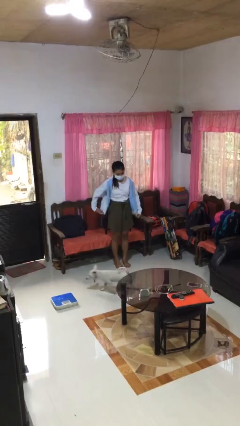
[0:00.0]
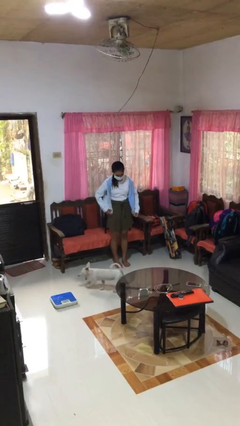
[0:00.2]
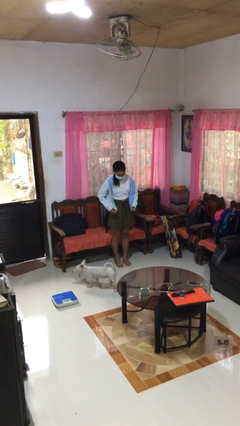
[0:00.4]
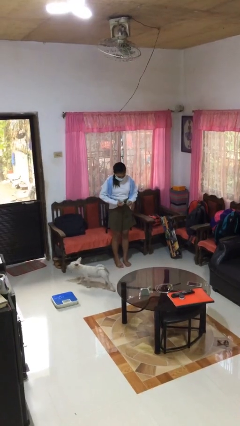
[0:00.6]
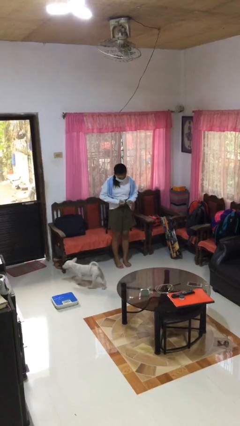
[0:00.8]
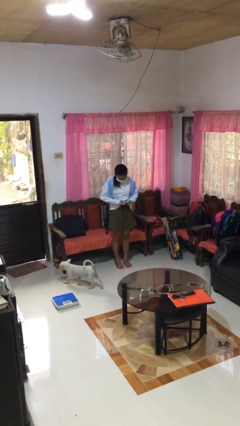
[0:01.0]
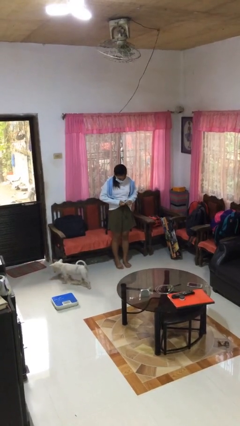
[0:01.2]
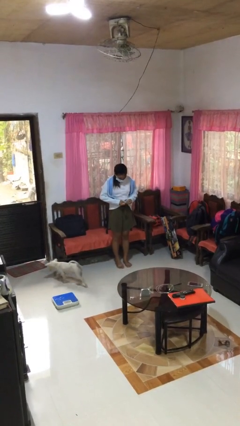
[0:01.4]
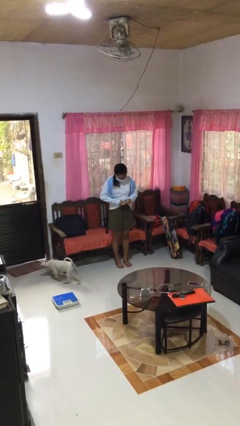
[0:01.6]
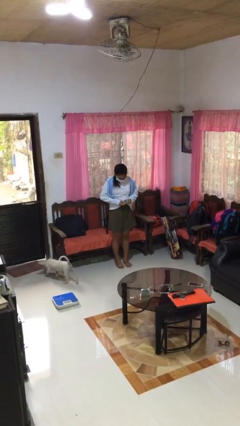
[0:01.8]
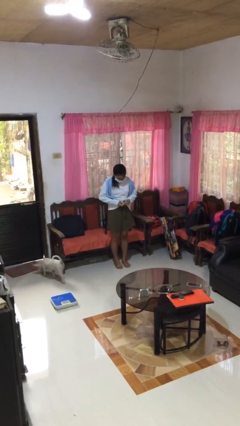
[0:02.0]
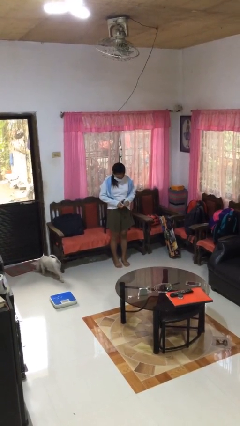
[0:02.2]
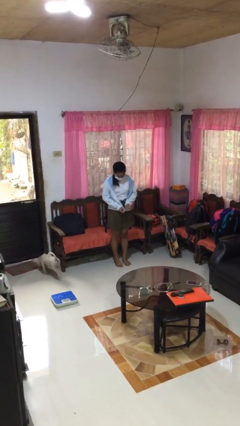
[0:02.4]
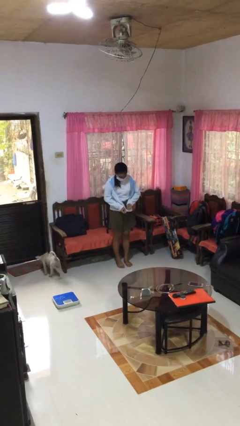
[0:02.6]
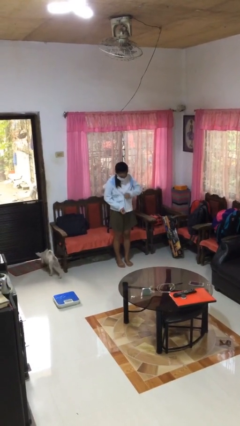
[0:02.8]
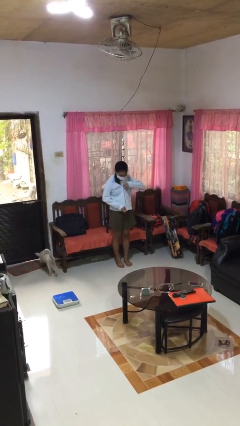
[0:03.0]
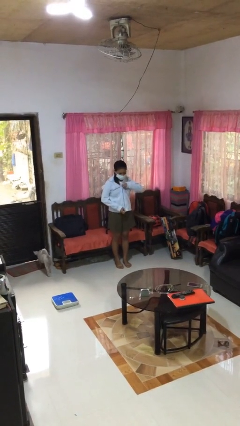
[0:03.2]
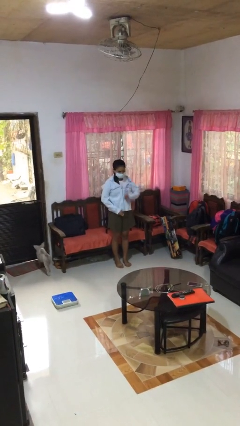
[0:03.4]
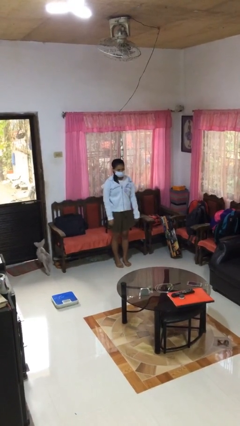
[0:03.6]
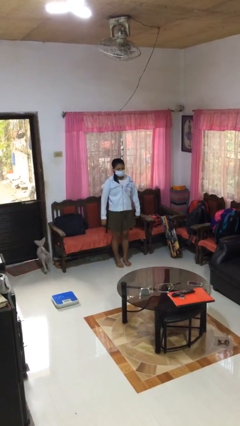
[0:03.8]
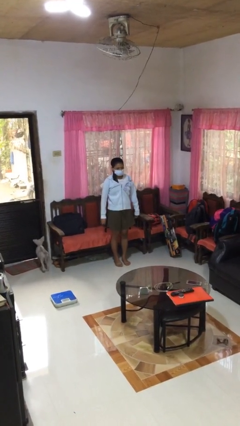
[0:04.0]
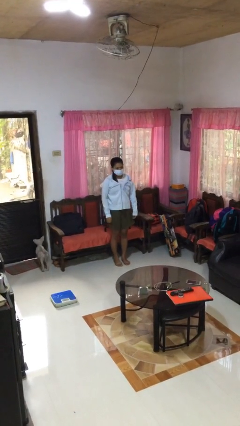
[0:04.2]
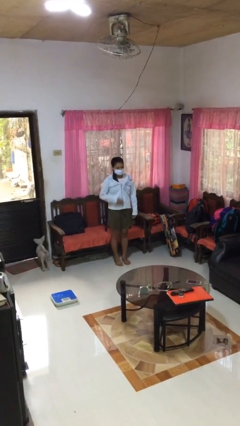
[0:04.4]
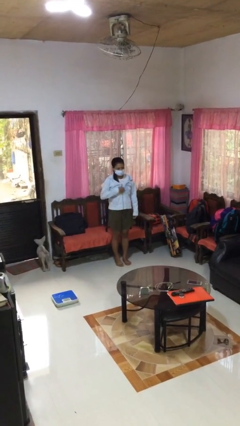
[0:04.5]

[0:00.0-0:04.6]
person zips up jacket

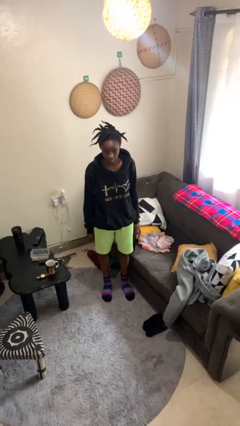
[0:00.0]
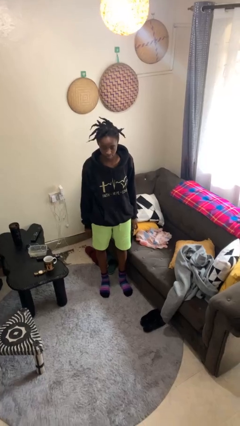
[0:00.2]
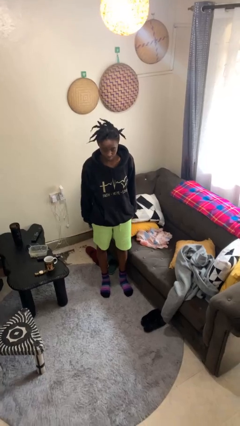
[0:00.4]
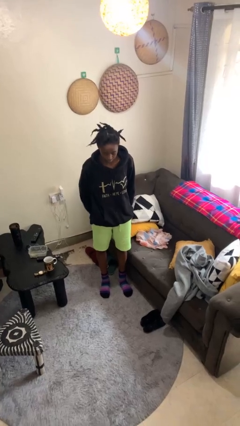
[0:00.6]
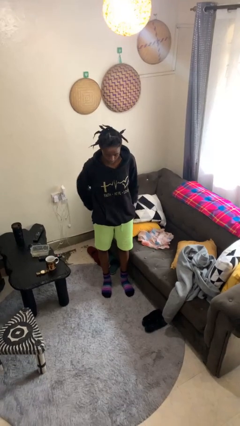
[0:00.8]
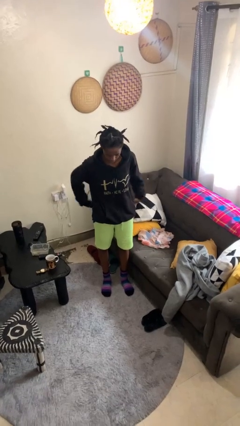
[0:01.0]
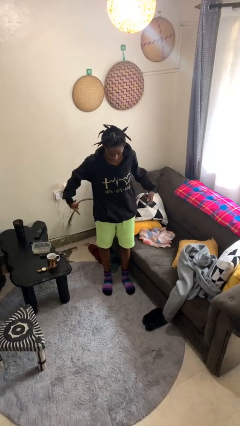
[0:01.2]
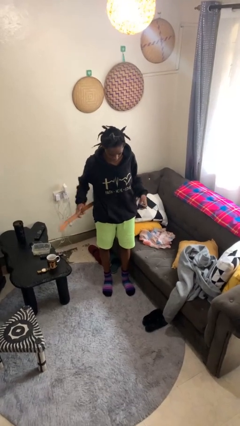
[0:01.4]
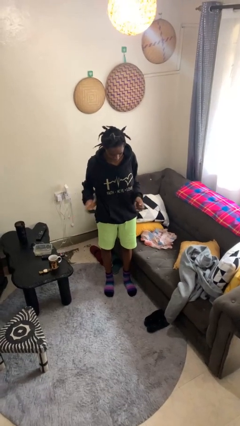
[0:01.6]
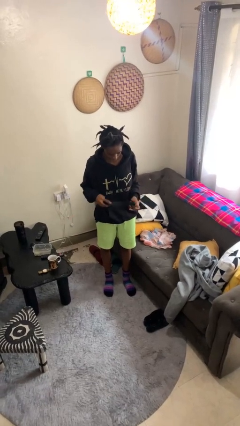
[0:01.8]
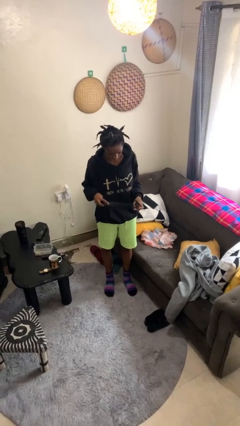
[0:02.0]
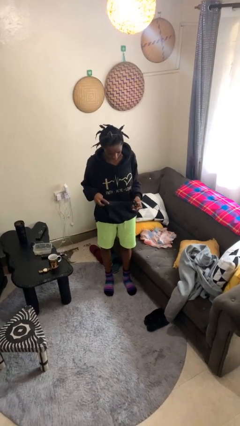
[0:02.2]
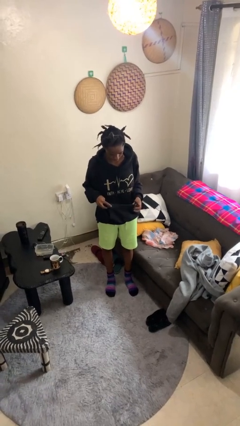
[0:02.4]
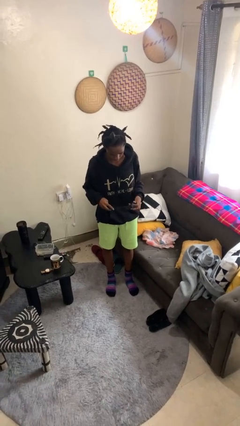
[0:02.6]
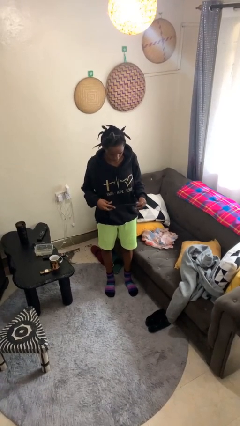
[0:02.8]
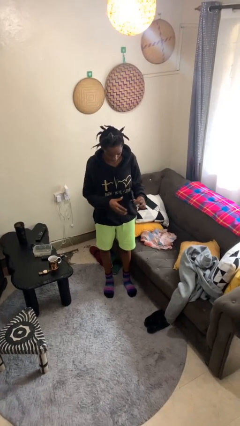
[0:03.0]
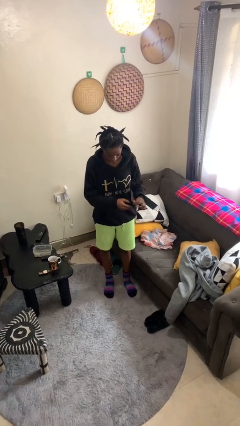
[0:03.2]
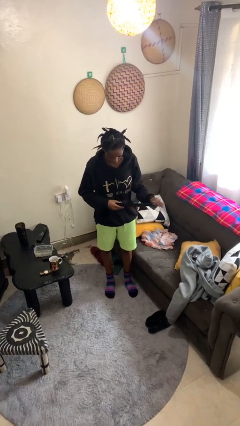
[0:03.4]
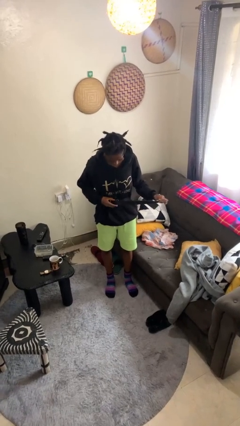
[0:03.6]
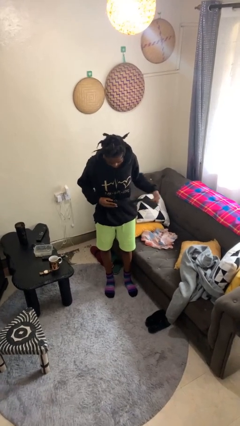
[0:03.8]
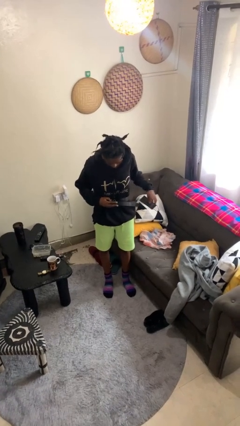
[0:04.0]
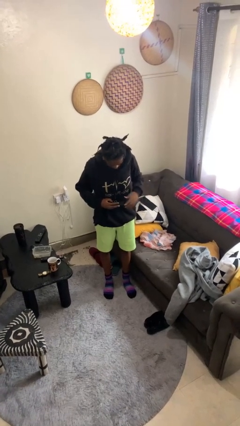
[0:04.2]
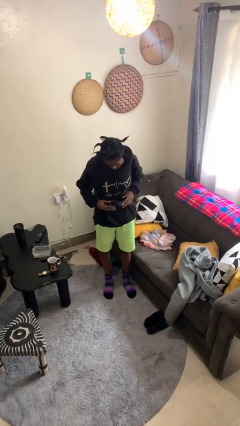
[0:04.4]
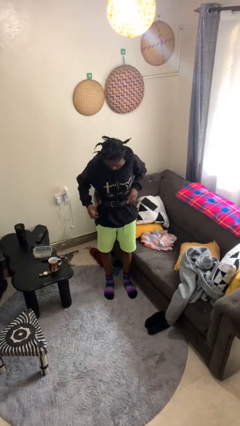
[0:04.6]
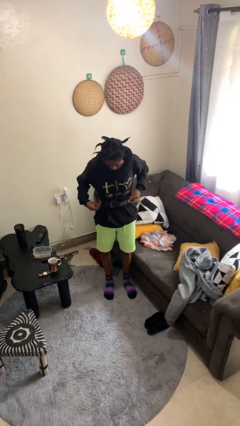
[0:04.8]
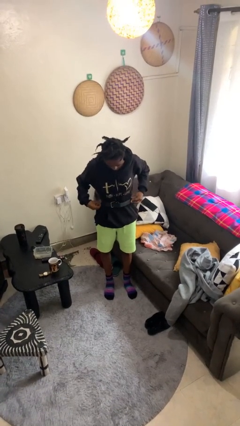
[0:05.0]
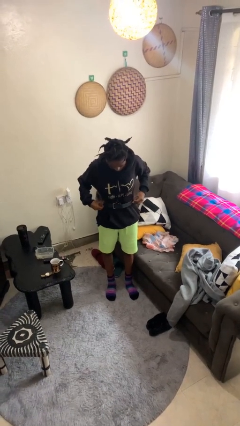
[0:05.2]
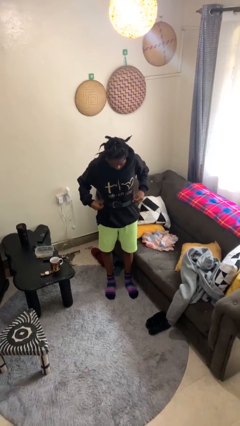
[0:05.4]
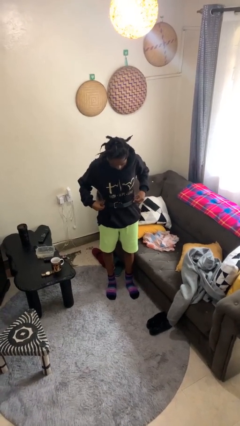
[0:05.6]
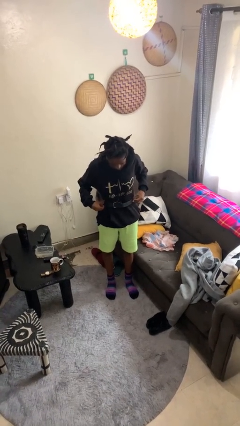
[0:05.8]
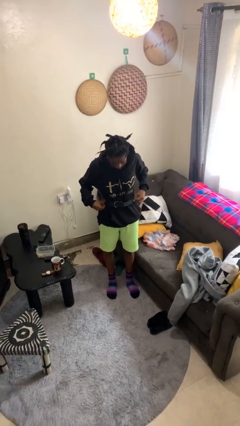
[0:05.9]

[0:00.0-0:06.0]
person puts on belt

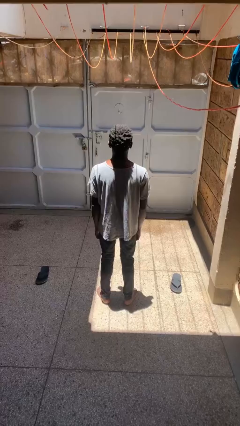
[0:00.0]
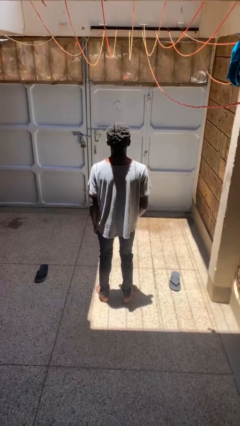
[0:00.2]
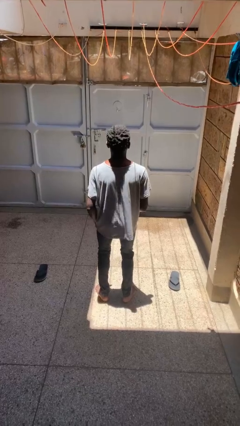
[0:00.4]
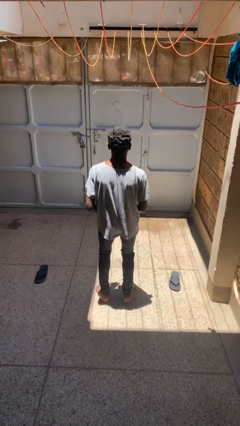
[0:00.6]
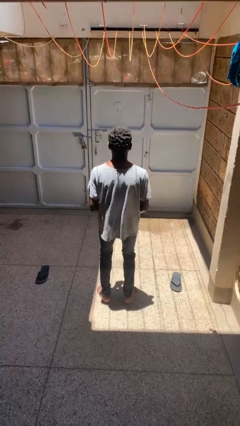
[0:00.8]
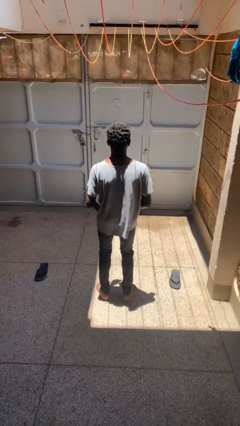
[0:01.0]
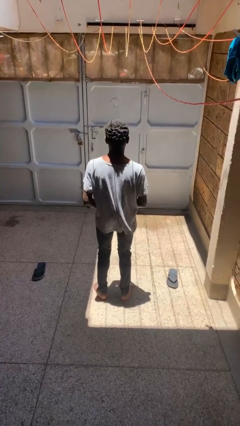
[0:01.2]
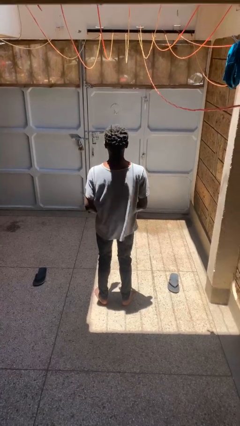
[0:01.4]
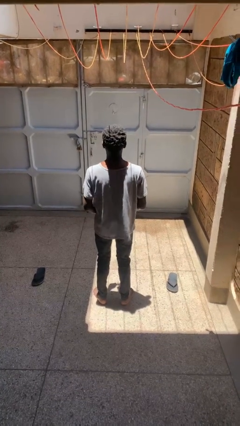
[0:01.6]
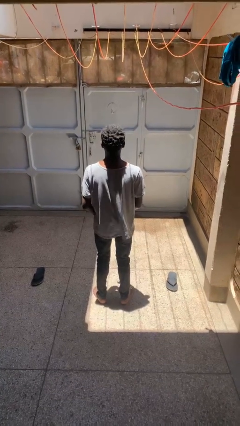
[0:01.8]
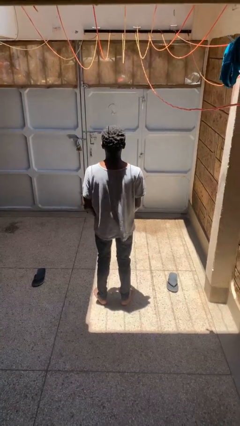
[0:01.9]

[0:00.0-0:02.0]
person dances in place

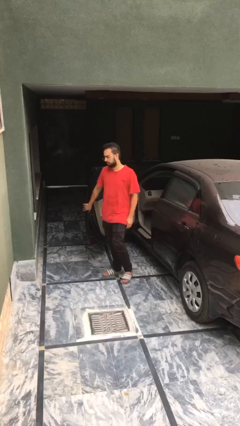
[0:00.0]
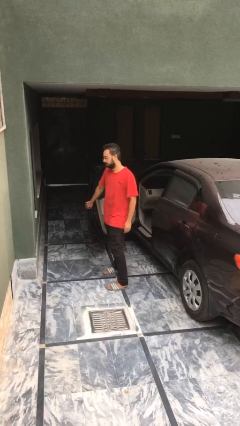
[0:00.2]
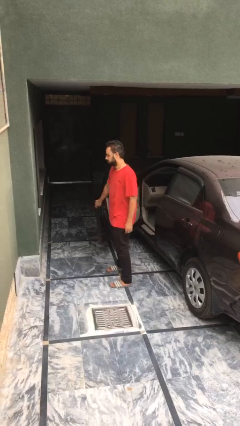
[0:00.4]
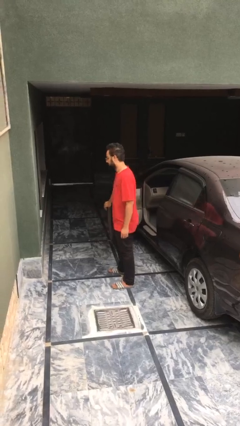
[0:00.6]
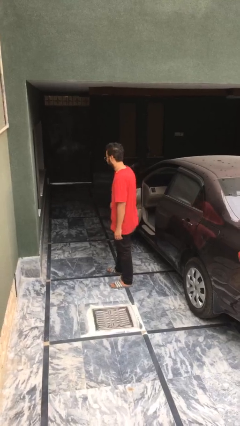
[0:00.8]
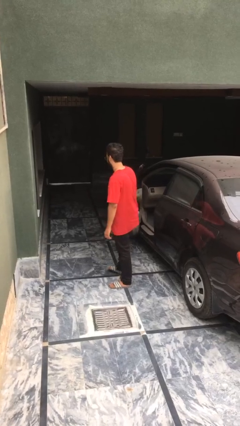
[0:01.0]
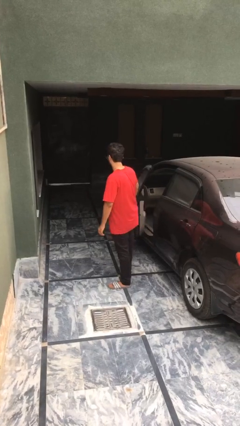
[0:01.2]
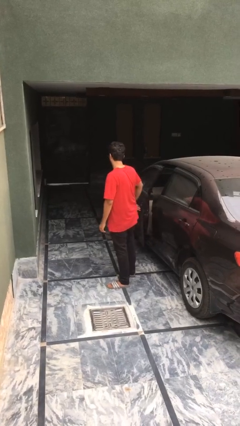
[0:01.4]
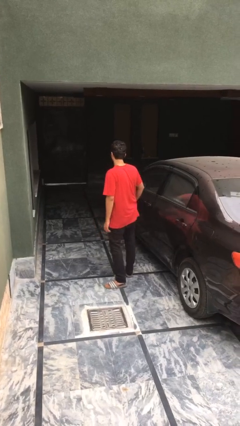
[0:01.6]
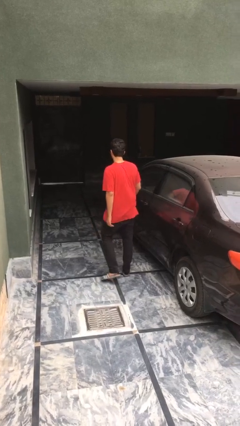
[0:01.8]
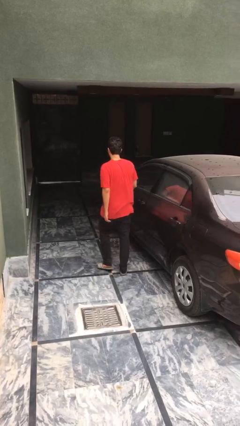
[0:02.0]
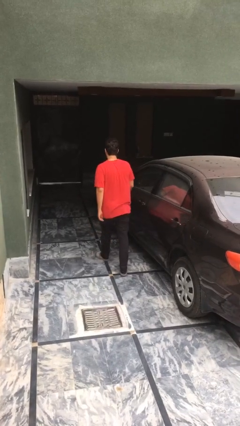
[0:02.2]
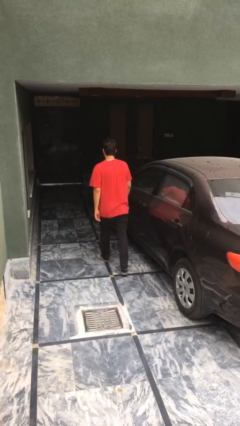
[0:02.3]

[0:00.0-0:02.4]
person closes car door

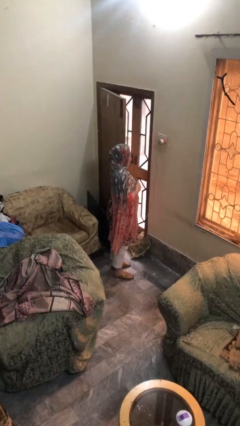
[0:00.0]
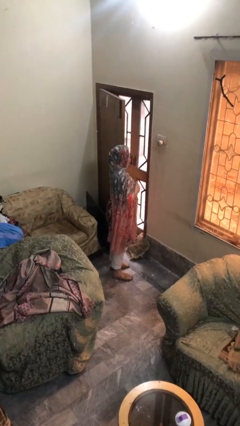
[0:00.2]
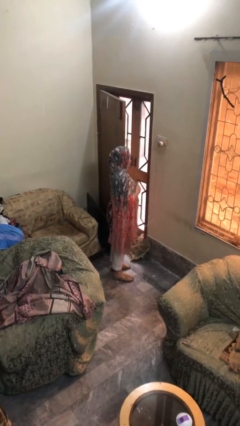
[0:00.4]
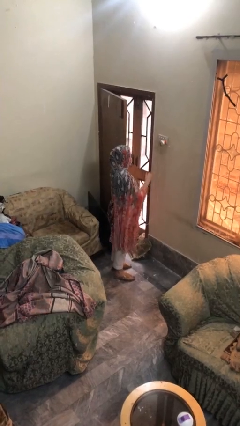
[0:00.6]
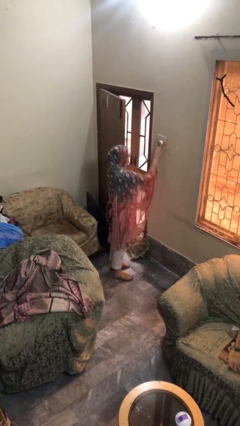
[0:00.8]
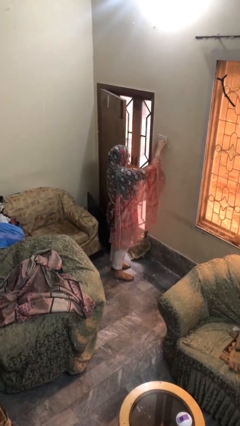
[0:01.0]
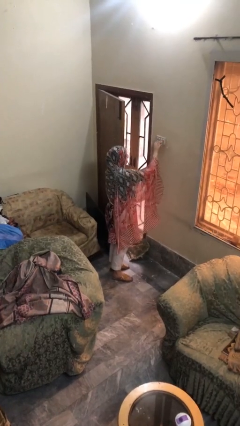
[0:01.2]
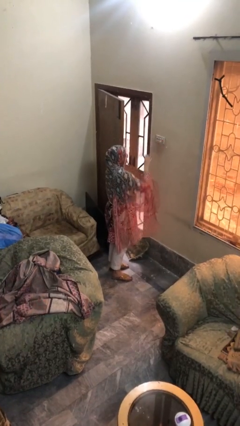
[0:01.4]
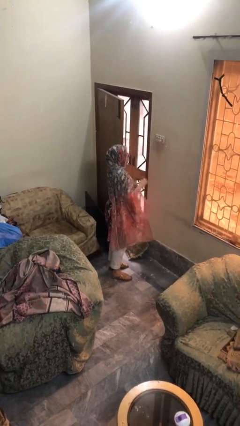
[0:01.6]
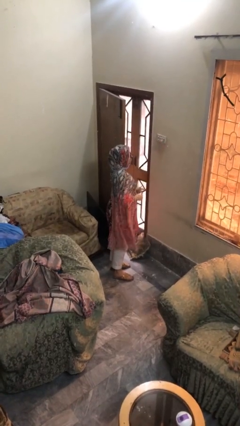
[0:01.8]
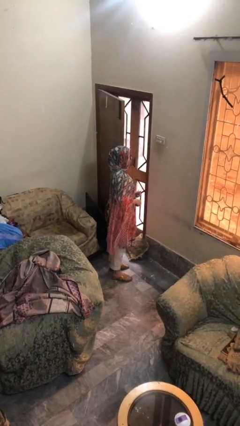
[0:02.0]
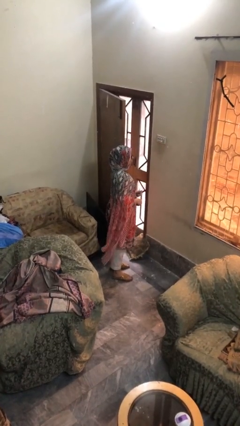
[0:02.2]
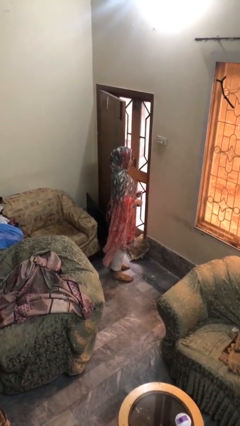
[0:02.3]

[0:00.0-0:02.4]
person unplugs from electrical socket
